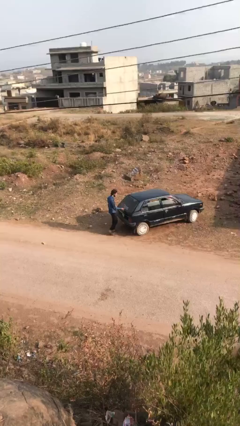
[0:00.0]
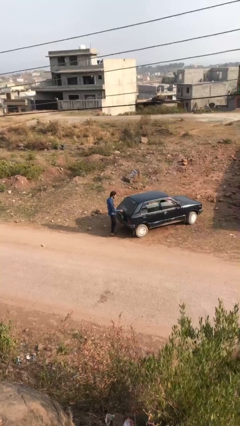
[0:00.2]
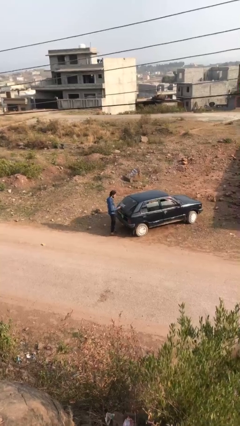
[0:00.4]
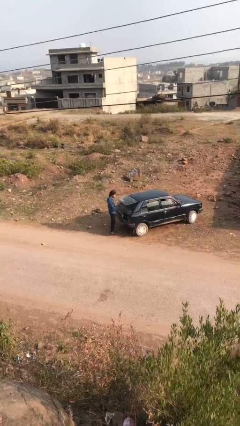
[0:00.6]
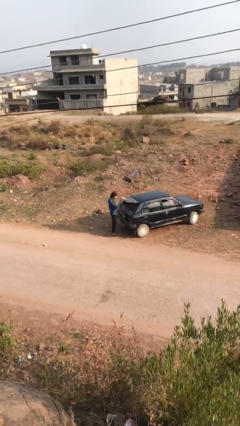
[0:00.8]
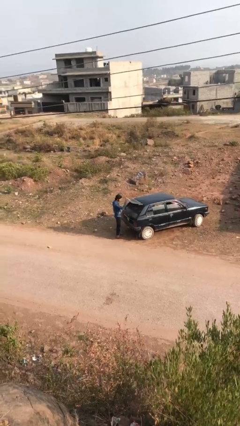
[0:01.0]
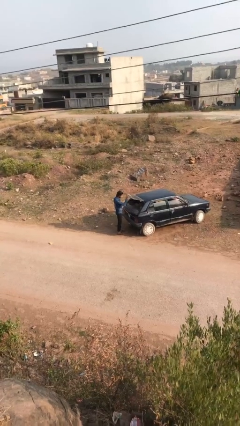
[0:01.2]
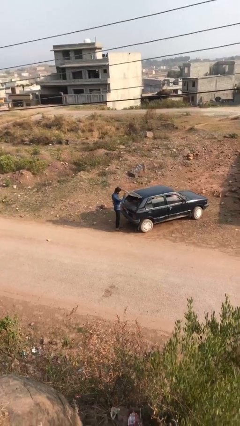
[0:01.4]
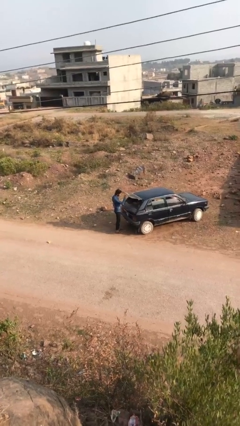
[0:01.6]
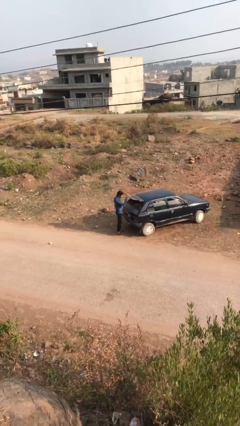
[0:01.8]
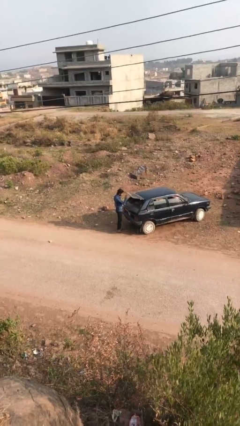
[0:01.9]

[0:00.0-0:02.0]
person opens car trunk

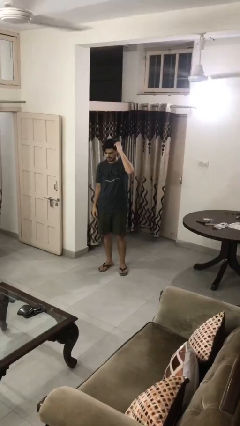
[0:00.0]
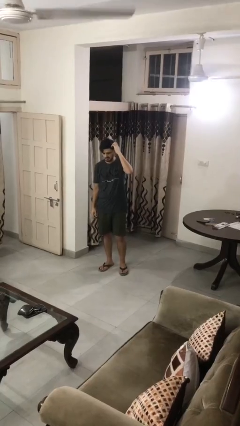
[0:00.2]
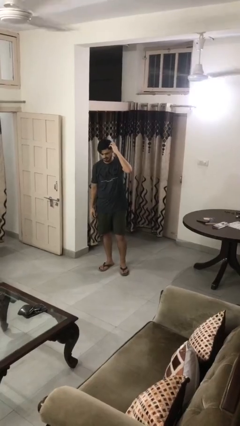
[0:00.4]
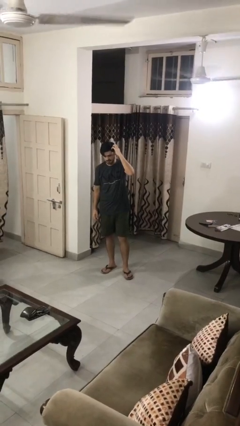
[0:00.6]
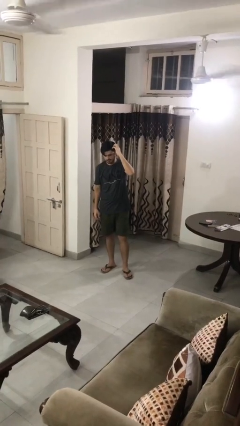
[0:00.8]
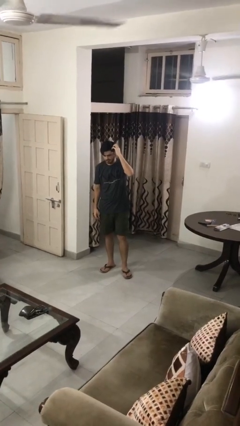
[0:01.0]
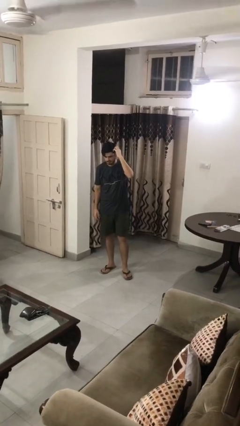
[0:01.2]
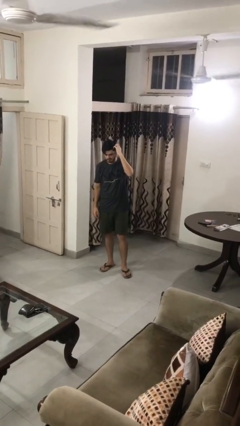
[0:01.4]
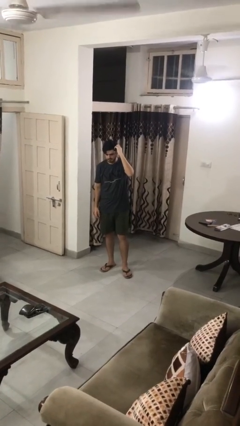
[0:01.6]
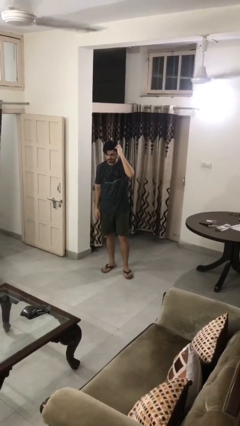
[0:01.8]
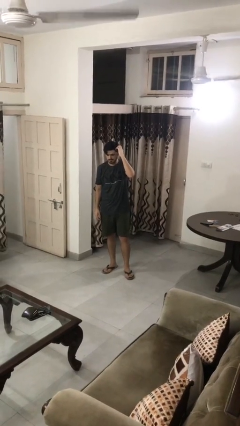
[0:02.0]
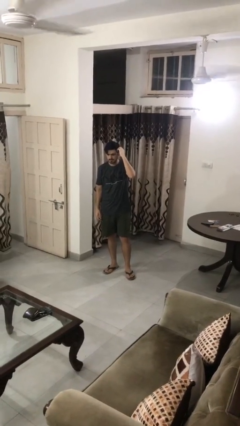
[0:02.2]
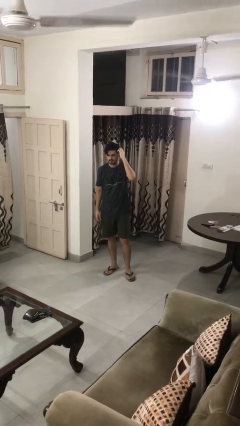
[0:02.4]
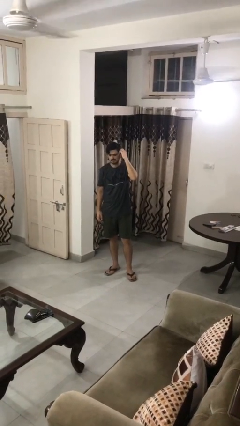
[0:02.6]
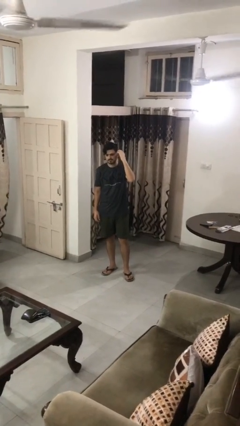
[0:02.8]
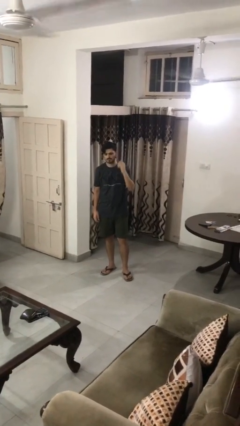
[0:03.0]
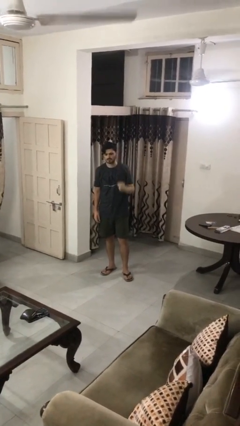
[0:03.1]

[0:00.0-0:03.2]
person scratches face

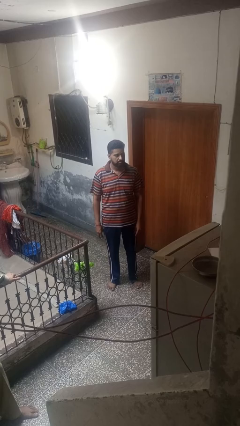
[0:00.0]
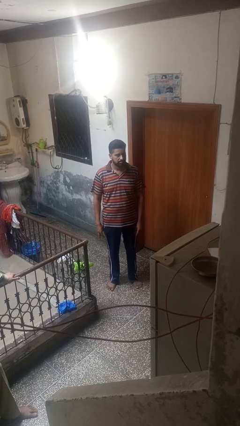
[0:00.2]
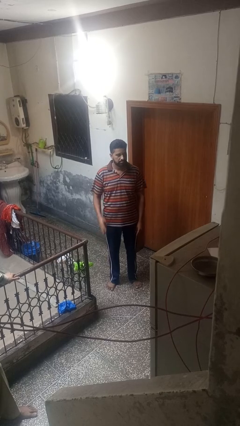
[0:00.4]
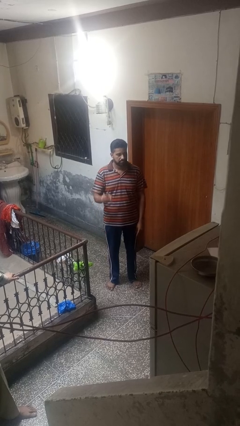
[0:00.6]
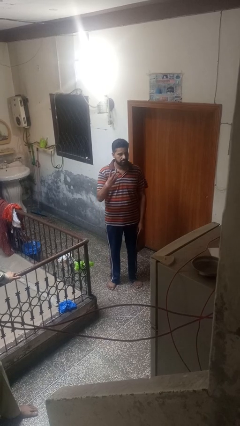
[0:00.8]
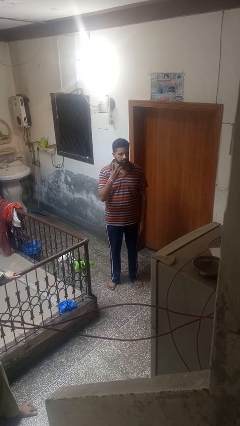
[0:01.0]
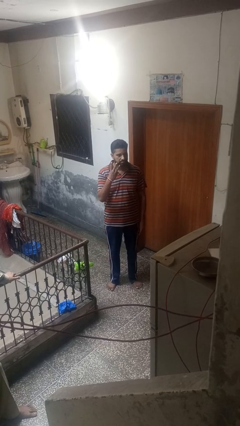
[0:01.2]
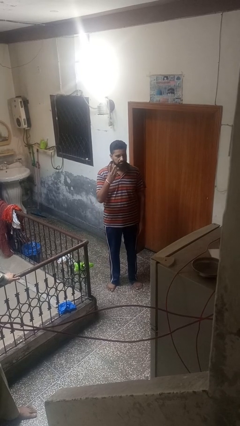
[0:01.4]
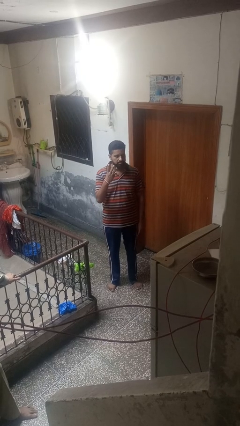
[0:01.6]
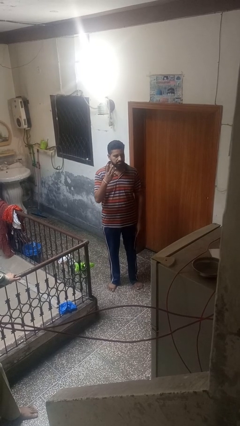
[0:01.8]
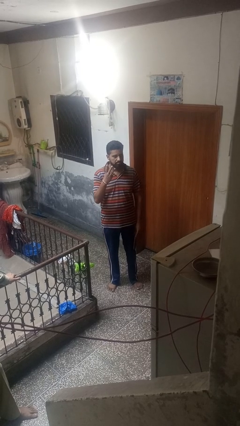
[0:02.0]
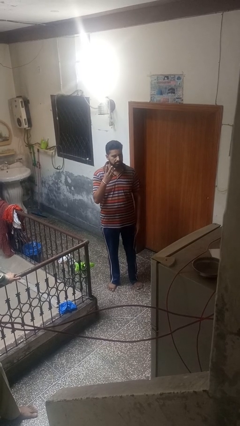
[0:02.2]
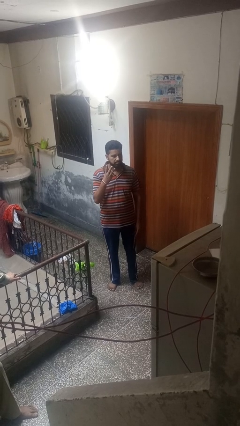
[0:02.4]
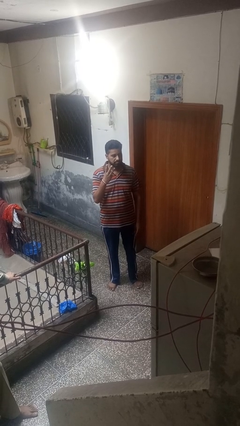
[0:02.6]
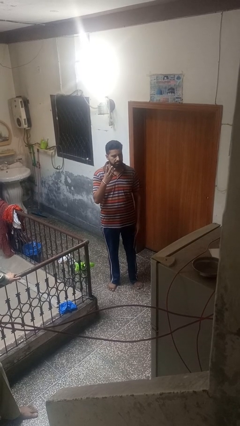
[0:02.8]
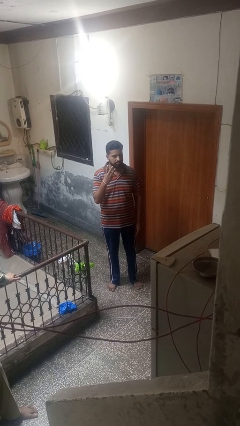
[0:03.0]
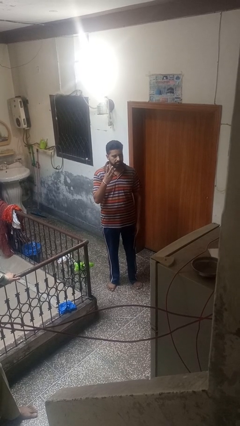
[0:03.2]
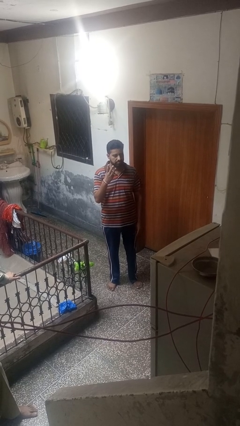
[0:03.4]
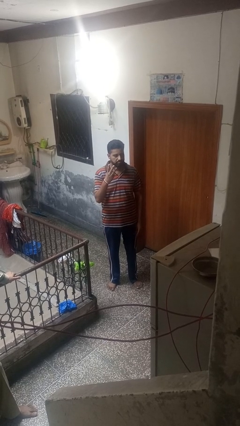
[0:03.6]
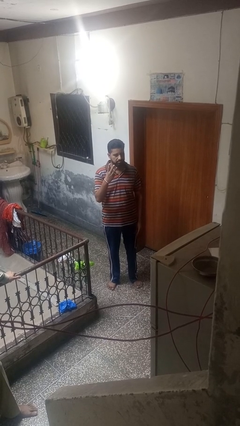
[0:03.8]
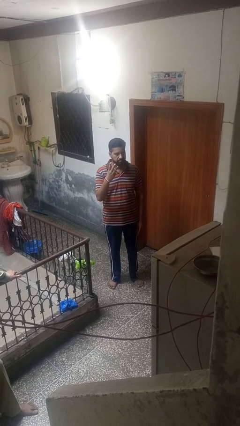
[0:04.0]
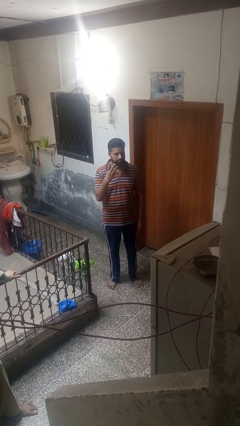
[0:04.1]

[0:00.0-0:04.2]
person gestures number three

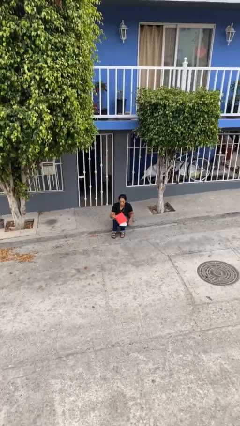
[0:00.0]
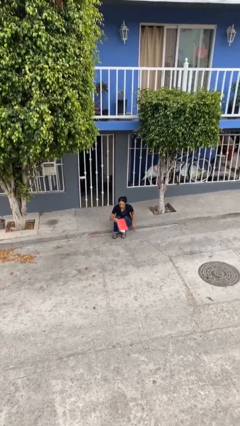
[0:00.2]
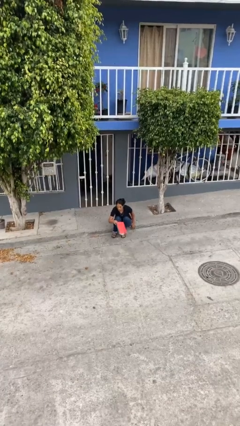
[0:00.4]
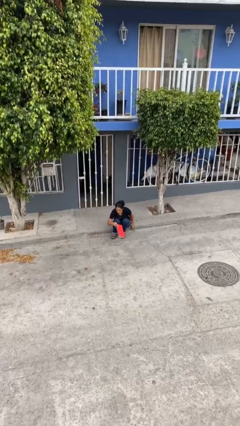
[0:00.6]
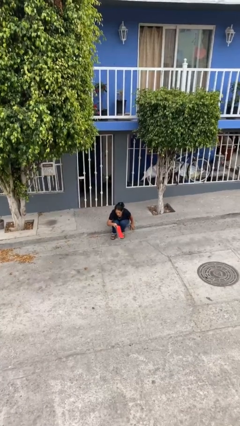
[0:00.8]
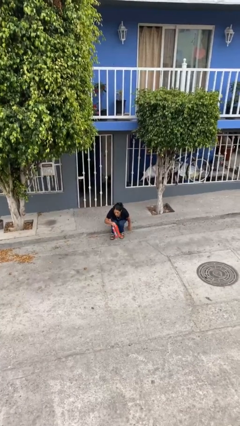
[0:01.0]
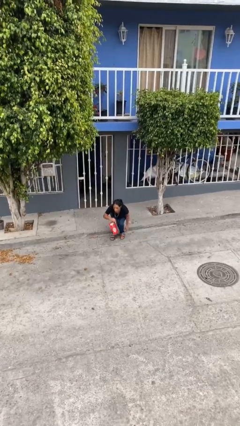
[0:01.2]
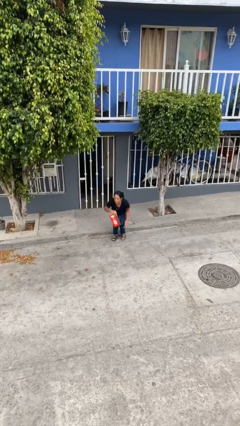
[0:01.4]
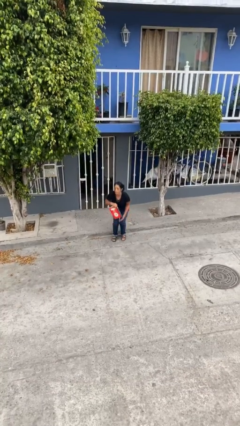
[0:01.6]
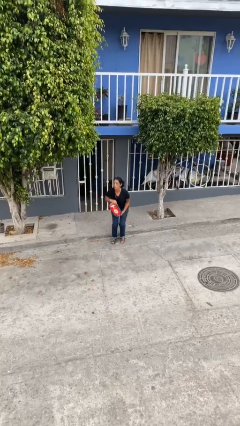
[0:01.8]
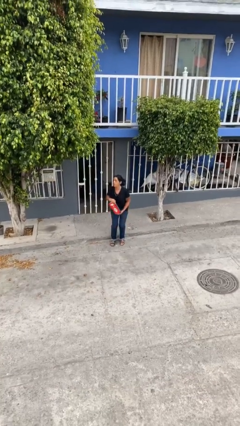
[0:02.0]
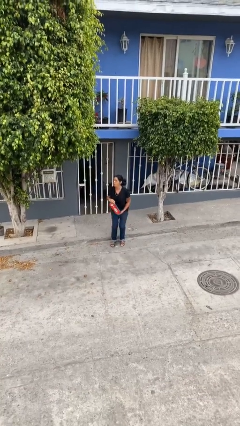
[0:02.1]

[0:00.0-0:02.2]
person stands up

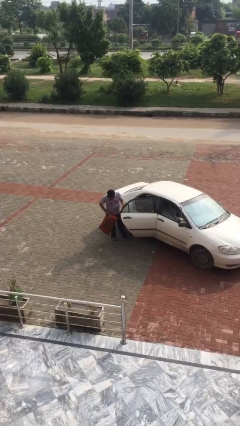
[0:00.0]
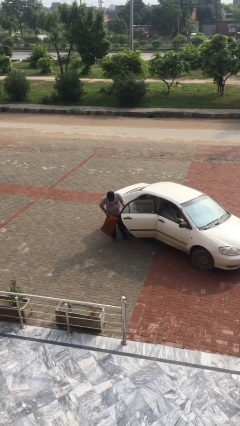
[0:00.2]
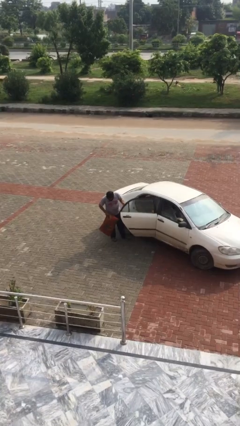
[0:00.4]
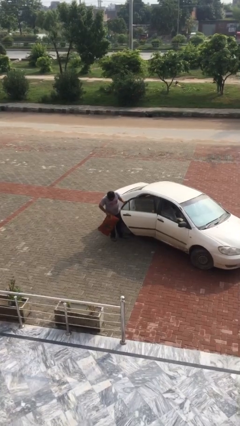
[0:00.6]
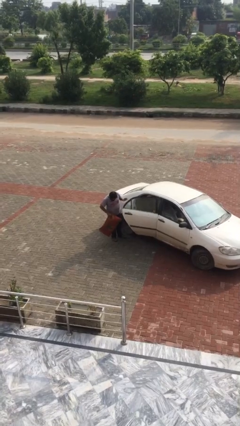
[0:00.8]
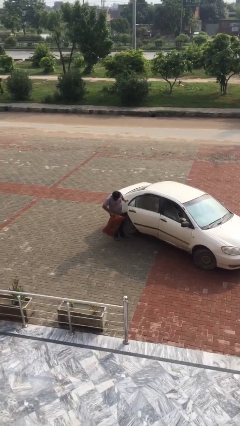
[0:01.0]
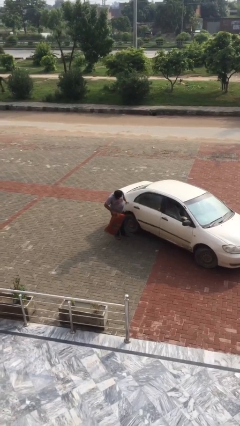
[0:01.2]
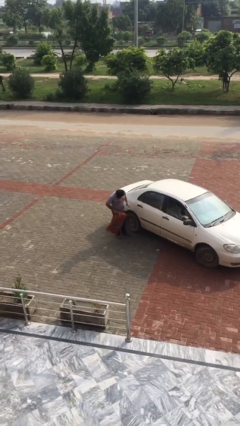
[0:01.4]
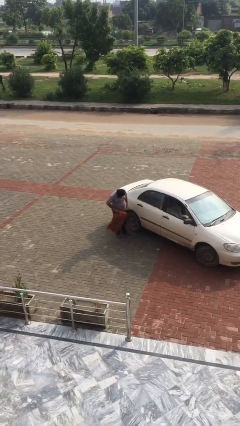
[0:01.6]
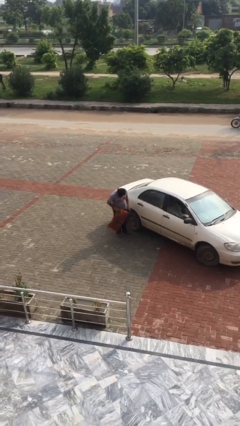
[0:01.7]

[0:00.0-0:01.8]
person closes car door

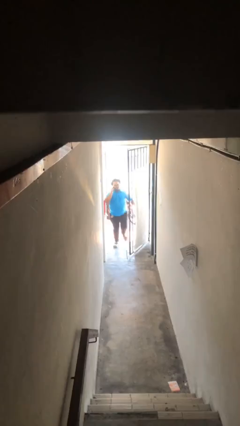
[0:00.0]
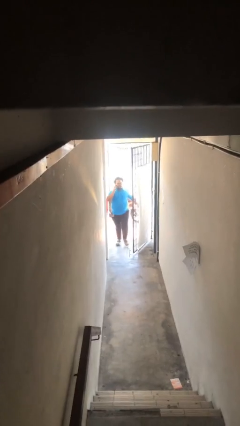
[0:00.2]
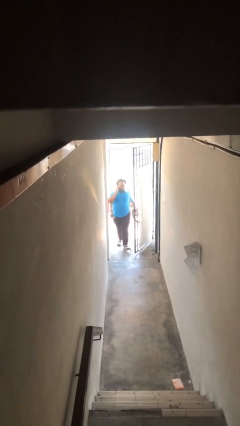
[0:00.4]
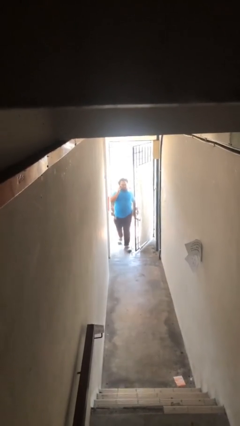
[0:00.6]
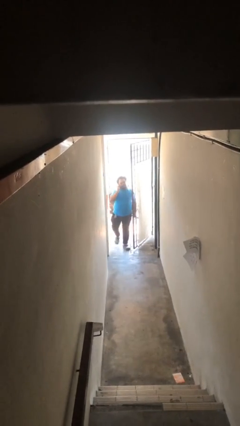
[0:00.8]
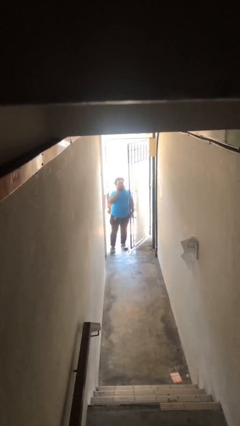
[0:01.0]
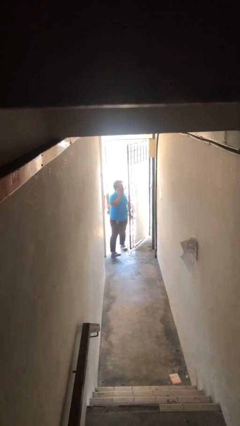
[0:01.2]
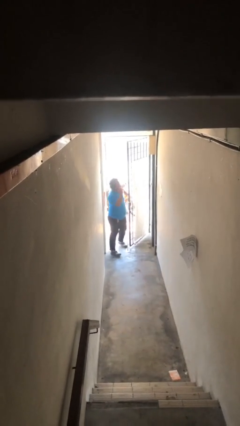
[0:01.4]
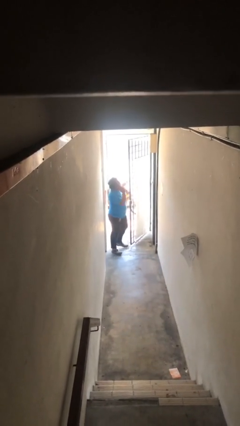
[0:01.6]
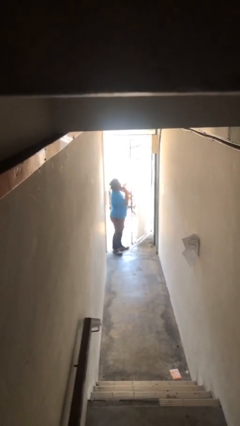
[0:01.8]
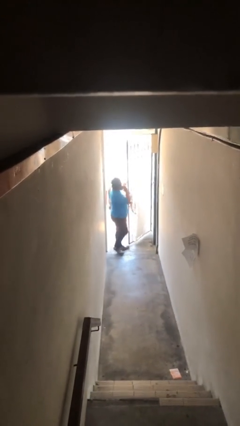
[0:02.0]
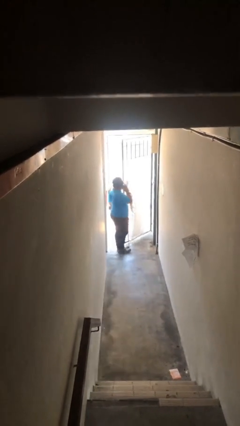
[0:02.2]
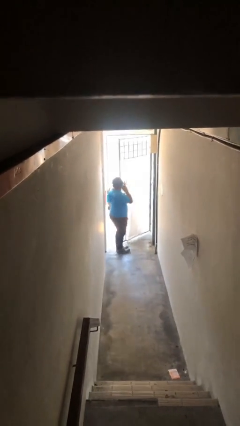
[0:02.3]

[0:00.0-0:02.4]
person enters scene through structure

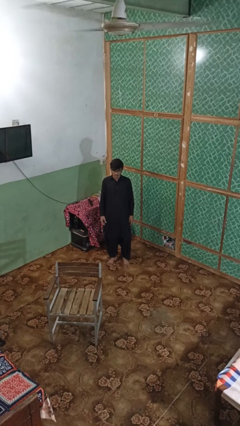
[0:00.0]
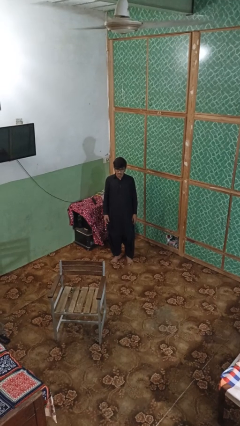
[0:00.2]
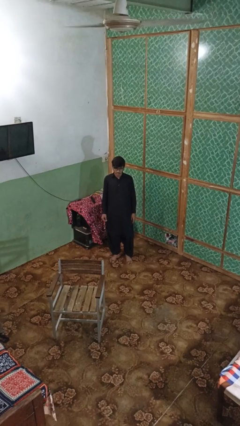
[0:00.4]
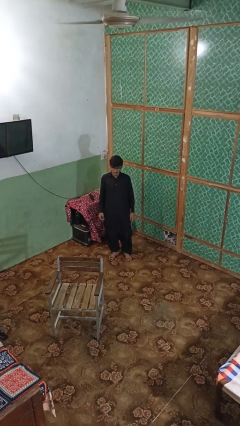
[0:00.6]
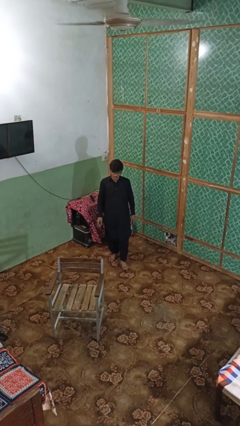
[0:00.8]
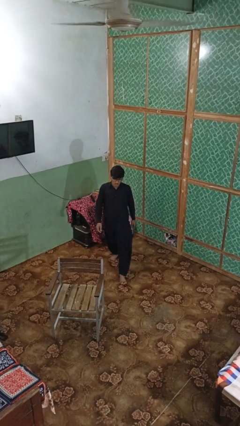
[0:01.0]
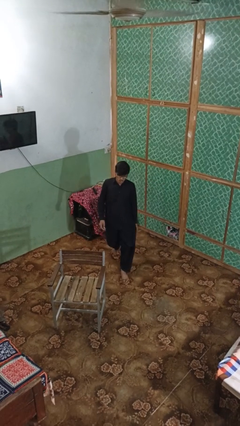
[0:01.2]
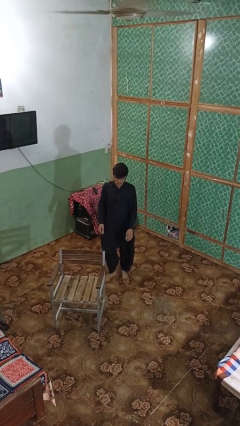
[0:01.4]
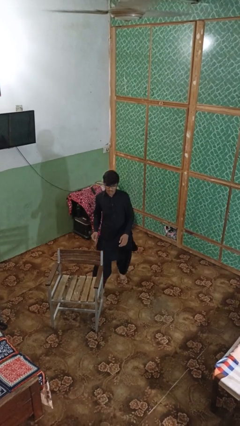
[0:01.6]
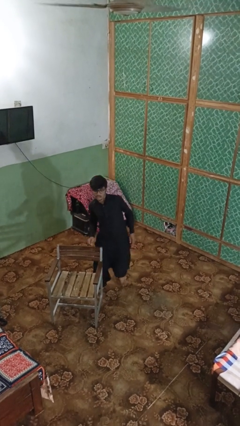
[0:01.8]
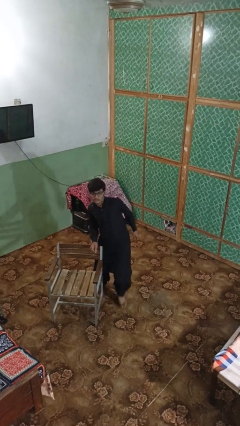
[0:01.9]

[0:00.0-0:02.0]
person trips on object on floor
